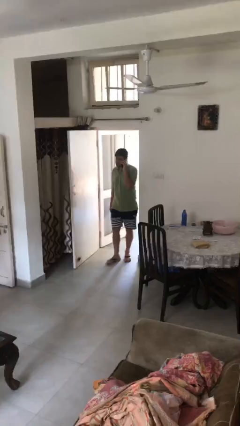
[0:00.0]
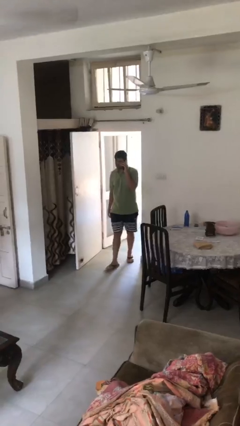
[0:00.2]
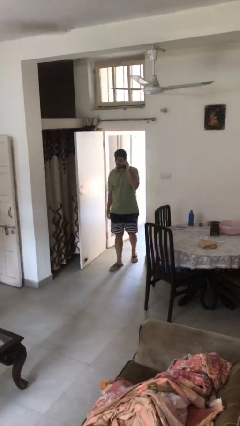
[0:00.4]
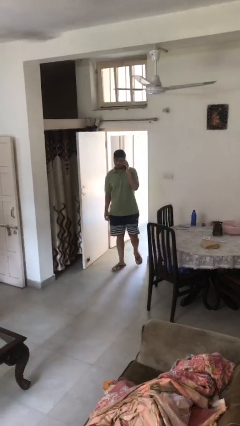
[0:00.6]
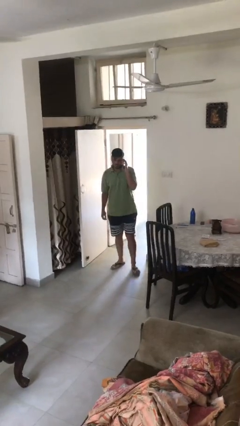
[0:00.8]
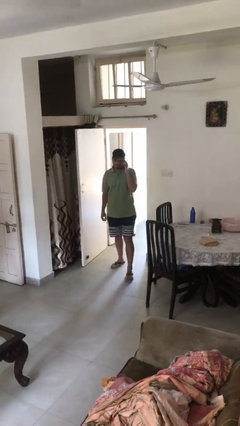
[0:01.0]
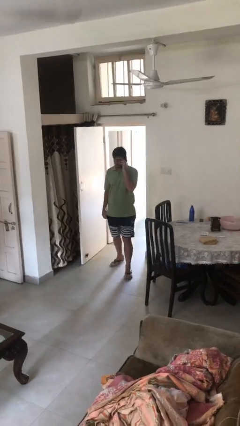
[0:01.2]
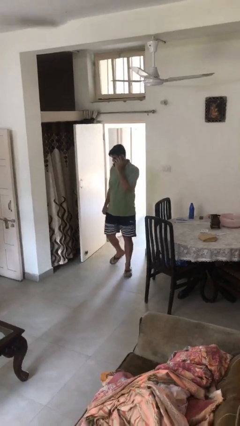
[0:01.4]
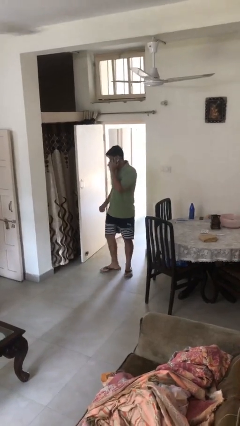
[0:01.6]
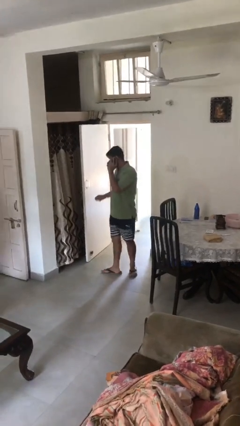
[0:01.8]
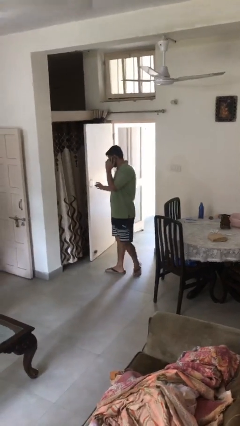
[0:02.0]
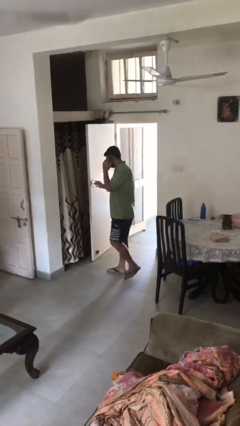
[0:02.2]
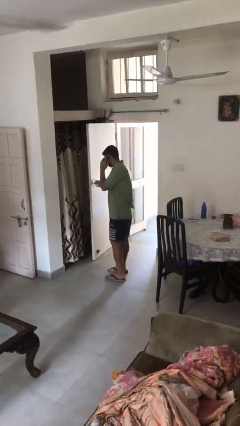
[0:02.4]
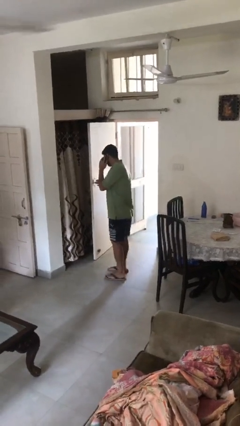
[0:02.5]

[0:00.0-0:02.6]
person enters scene through structure

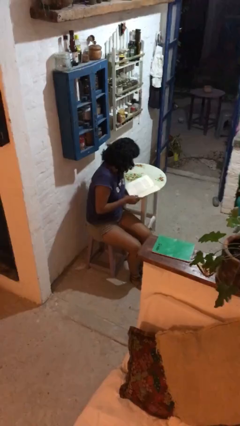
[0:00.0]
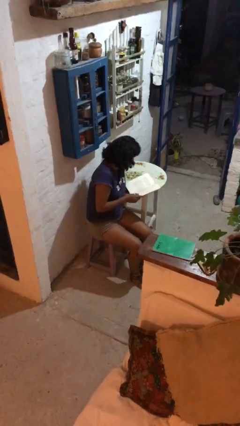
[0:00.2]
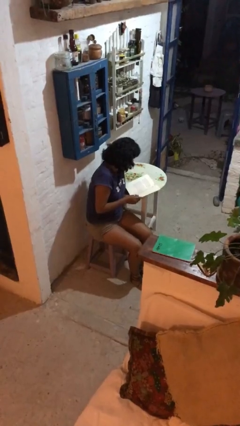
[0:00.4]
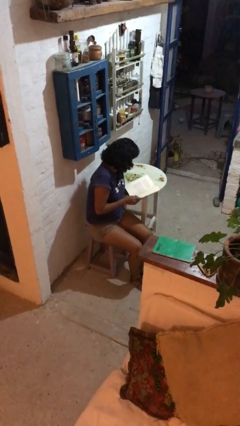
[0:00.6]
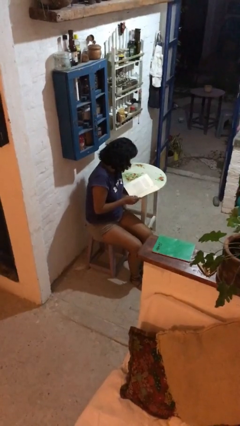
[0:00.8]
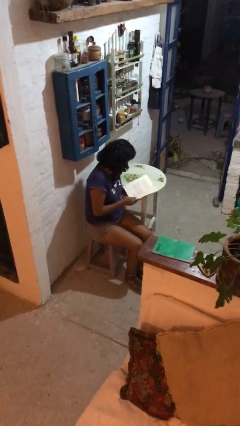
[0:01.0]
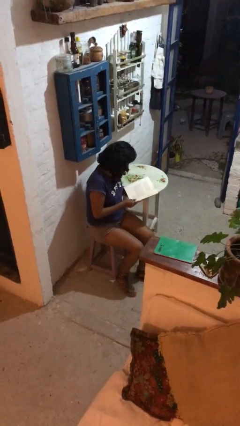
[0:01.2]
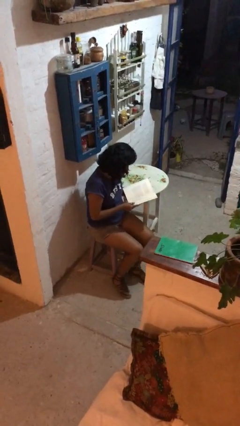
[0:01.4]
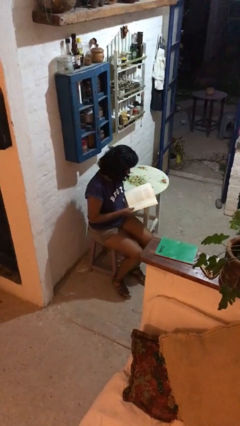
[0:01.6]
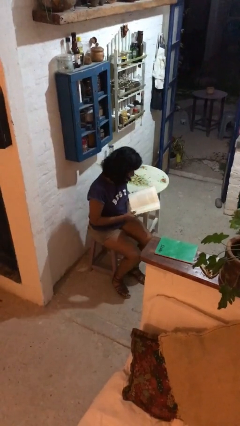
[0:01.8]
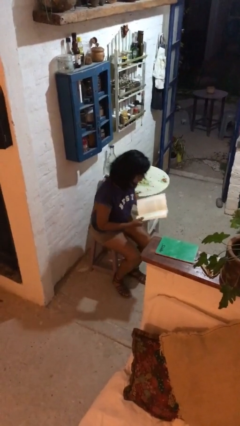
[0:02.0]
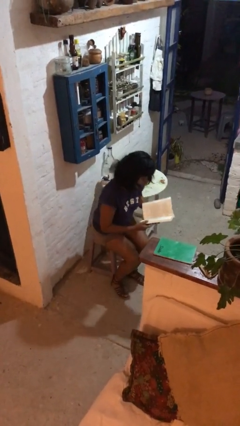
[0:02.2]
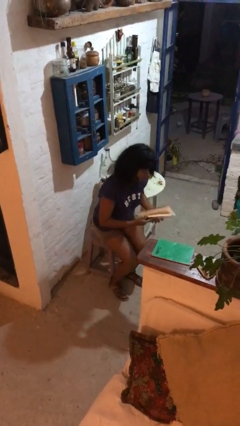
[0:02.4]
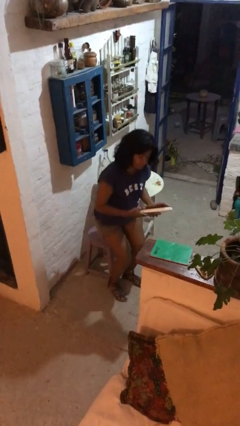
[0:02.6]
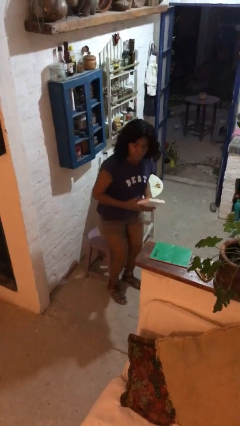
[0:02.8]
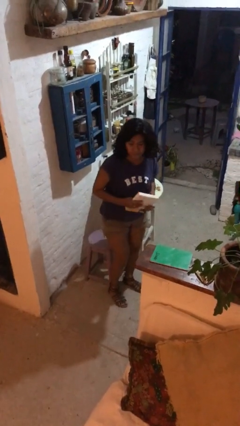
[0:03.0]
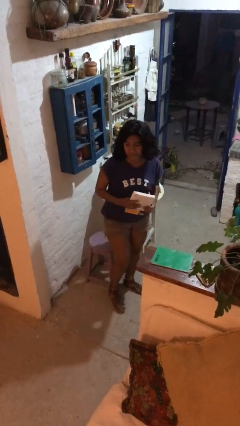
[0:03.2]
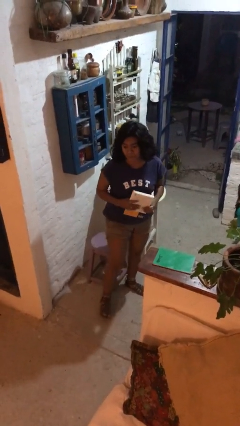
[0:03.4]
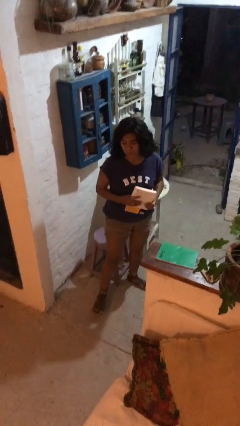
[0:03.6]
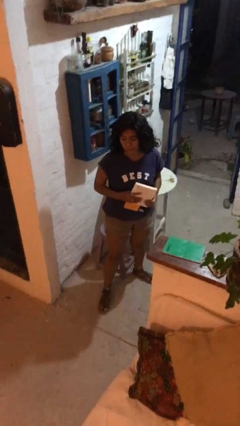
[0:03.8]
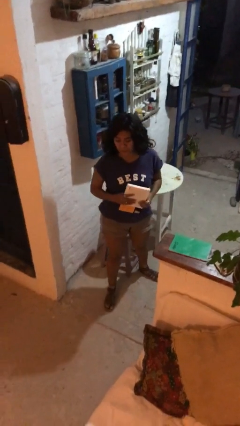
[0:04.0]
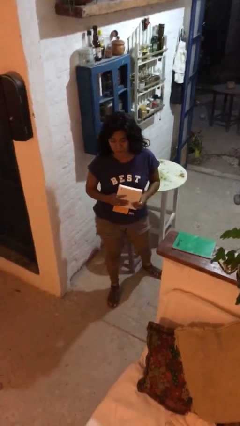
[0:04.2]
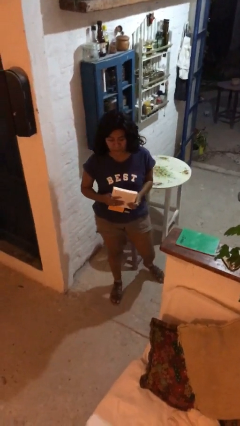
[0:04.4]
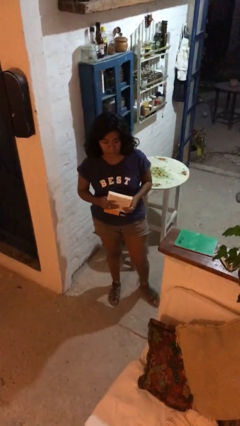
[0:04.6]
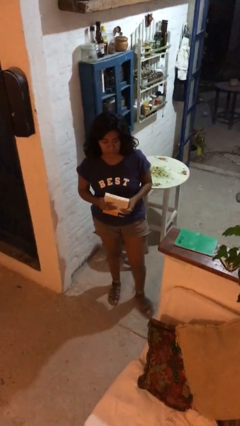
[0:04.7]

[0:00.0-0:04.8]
person stands up

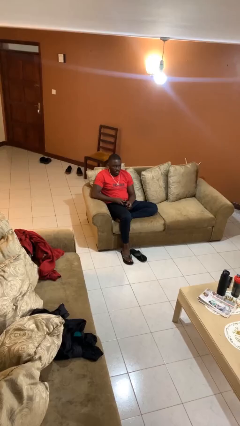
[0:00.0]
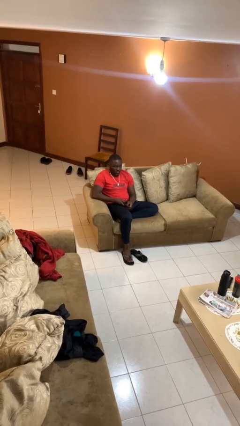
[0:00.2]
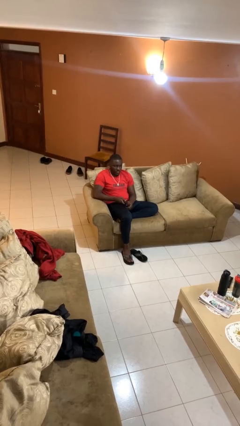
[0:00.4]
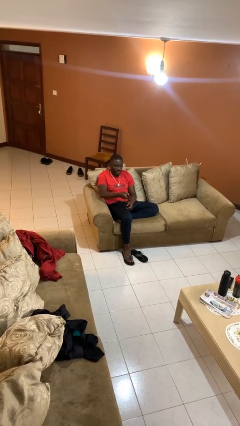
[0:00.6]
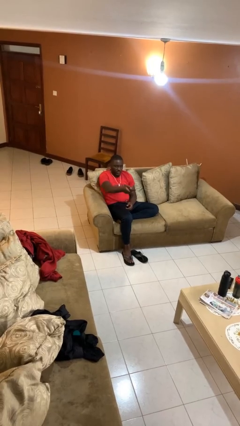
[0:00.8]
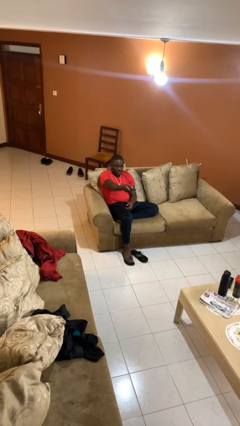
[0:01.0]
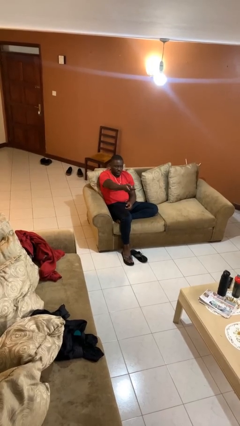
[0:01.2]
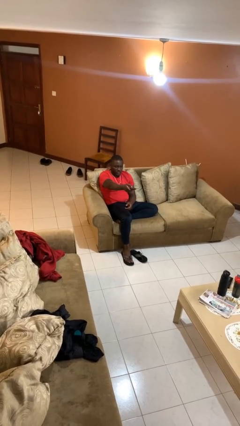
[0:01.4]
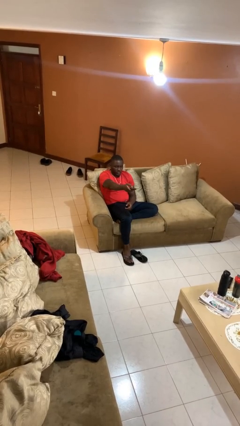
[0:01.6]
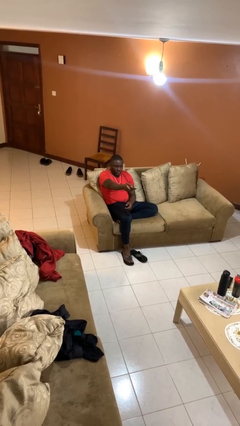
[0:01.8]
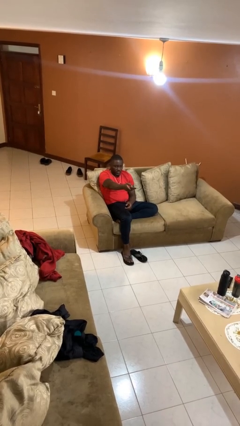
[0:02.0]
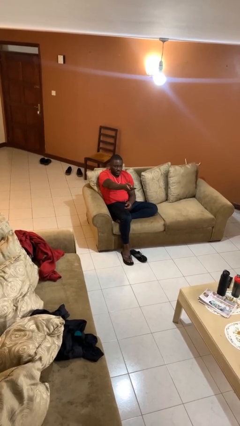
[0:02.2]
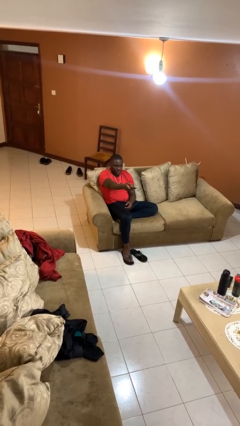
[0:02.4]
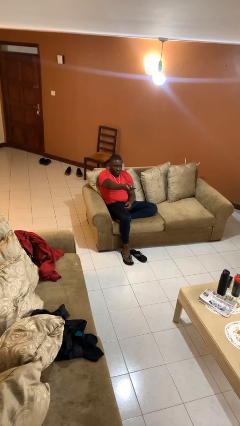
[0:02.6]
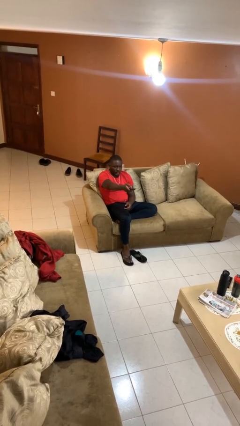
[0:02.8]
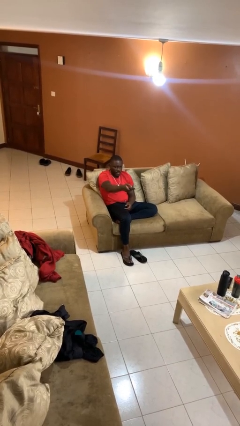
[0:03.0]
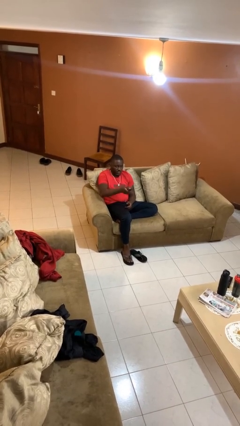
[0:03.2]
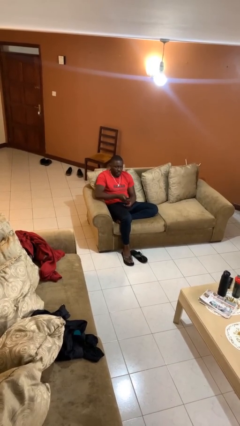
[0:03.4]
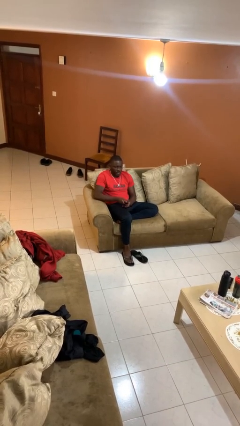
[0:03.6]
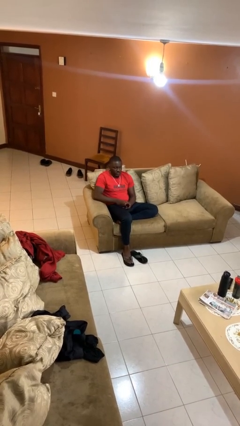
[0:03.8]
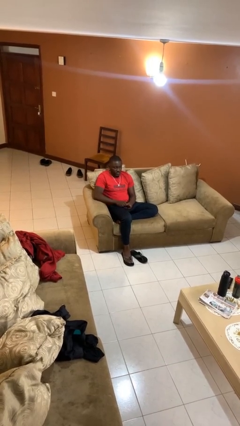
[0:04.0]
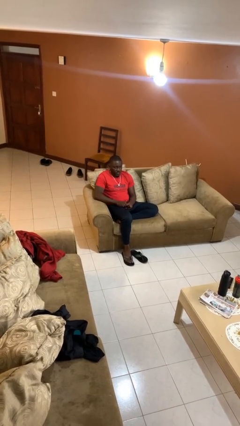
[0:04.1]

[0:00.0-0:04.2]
person uses television remote

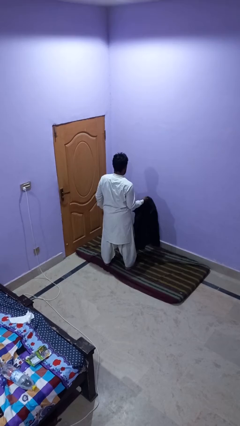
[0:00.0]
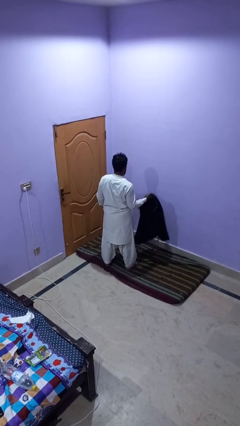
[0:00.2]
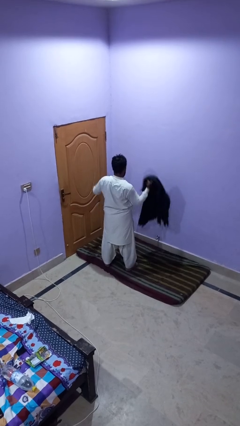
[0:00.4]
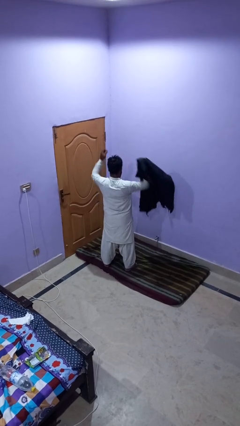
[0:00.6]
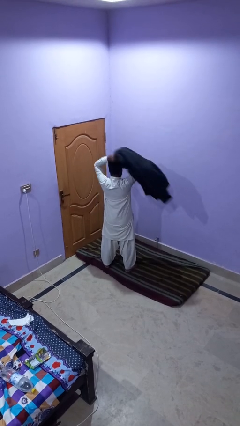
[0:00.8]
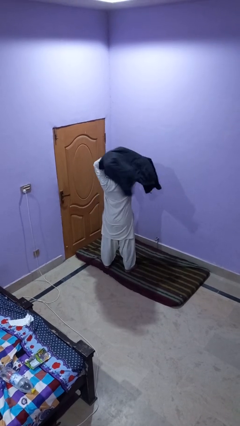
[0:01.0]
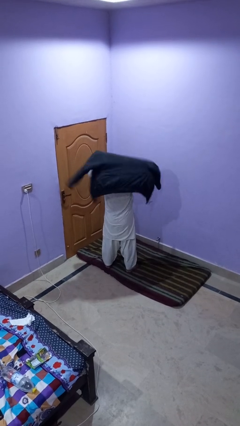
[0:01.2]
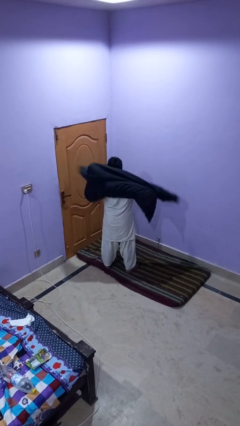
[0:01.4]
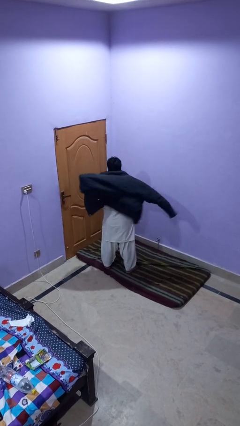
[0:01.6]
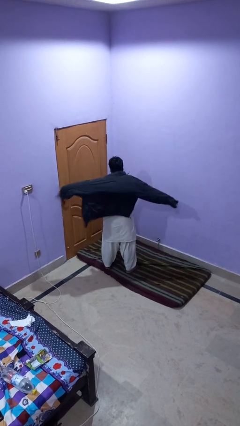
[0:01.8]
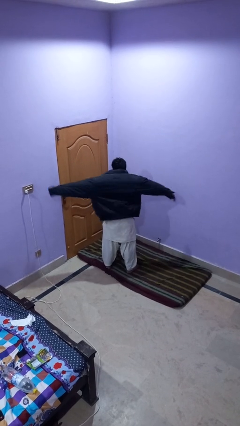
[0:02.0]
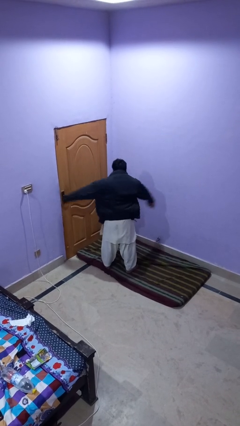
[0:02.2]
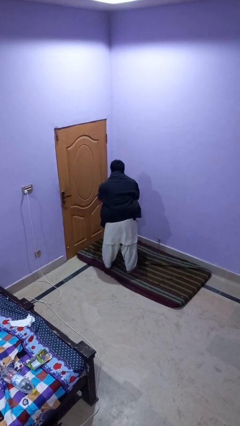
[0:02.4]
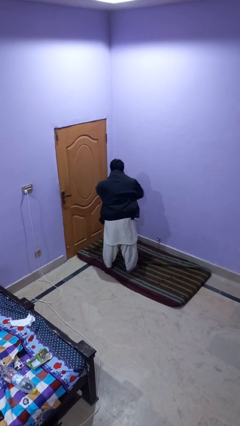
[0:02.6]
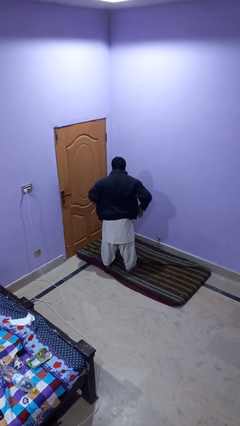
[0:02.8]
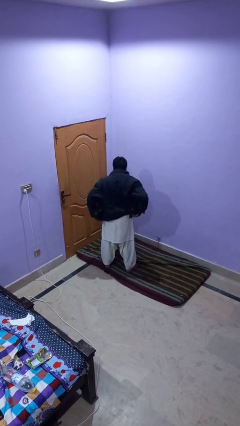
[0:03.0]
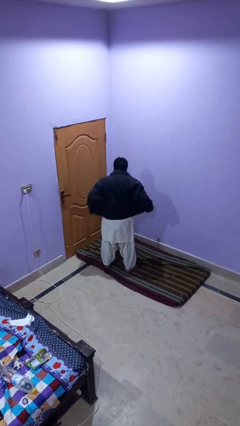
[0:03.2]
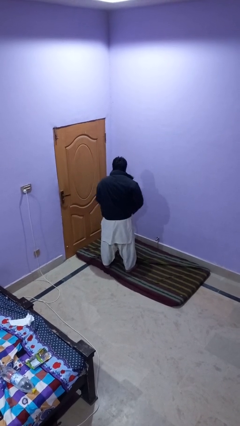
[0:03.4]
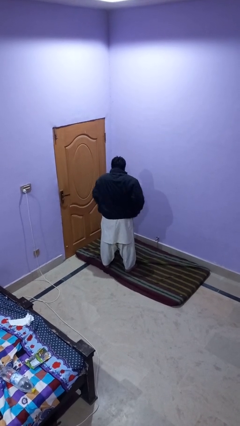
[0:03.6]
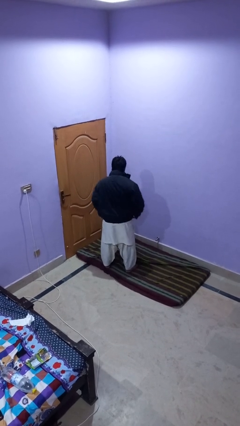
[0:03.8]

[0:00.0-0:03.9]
person puts on jacket

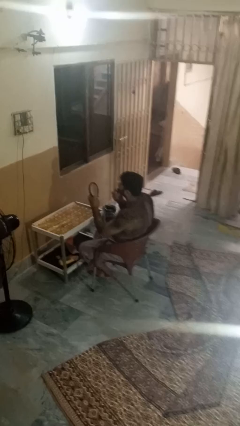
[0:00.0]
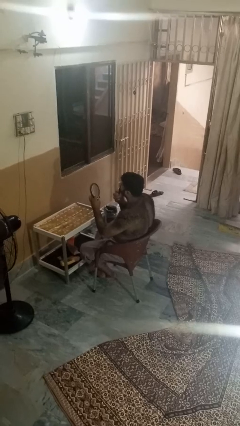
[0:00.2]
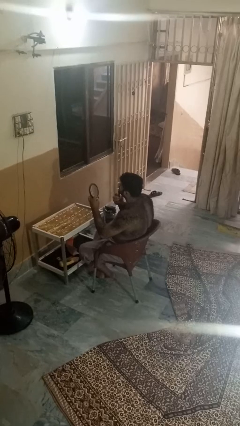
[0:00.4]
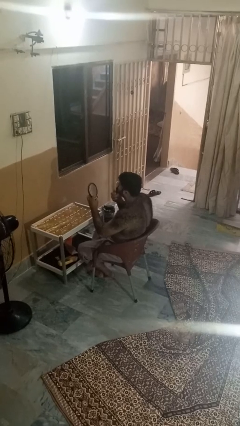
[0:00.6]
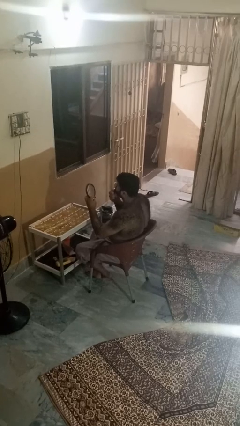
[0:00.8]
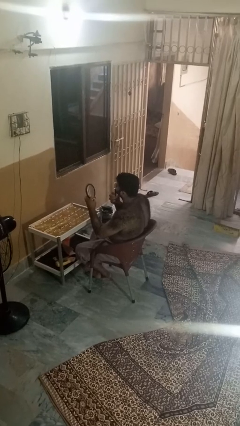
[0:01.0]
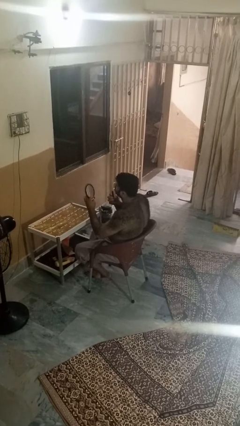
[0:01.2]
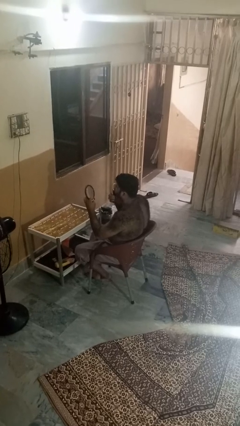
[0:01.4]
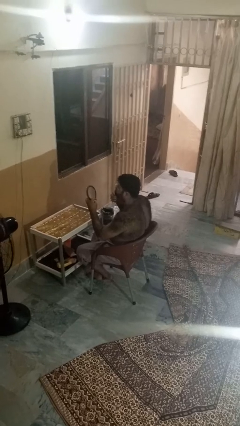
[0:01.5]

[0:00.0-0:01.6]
person applies lip makeup

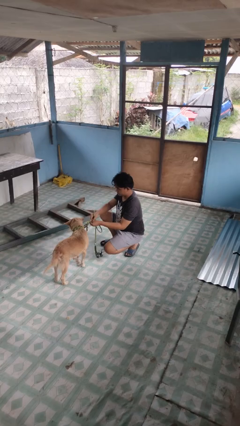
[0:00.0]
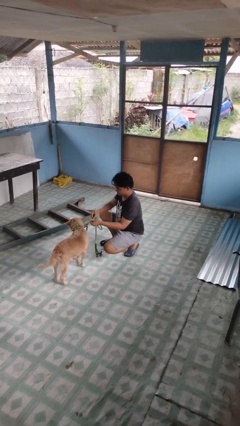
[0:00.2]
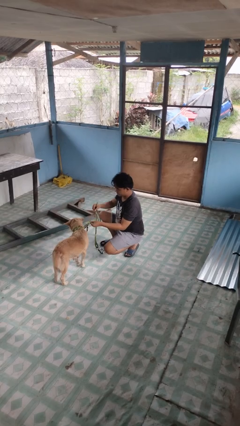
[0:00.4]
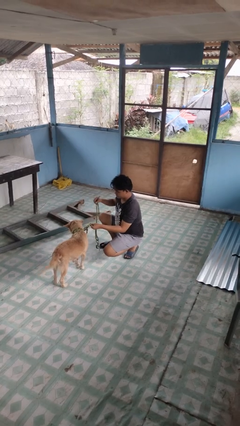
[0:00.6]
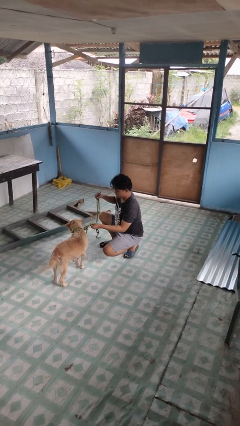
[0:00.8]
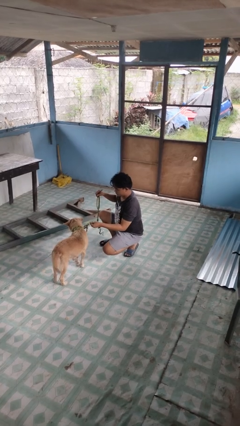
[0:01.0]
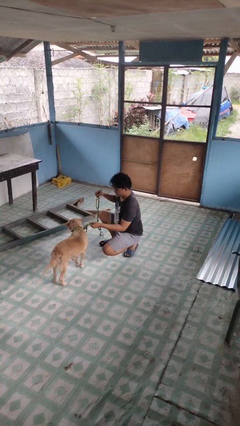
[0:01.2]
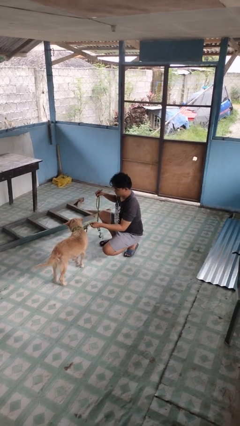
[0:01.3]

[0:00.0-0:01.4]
person unattaches leash from dog
